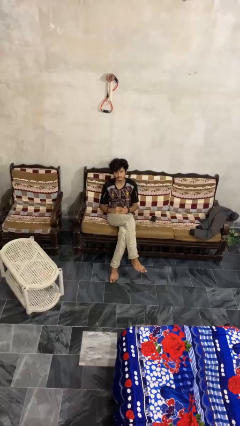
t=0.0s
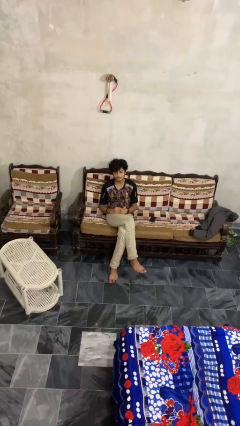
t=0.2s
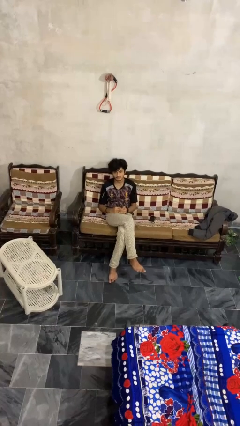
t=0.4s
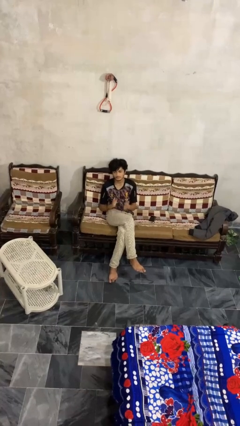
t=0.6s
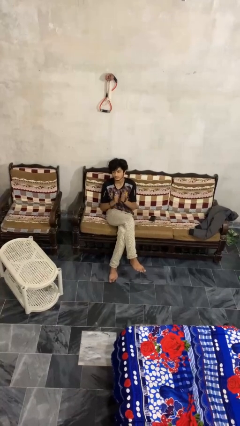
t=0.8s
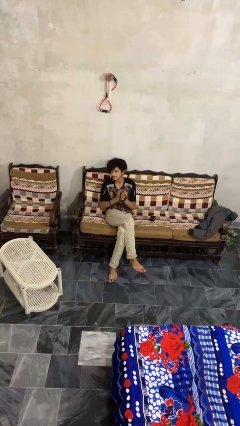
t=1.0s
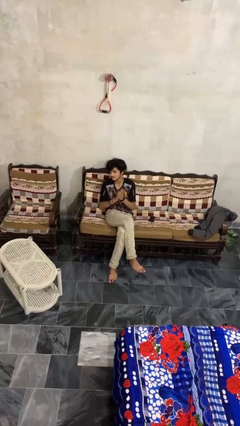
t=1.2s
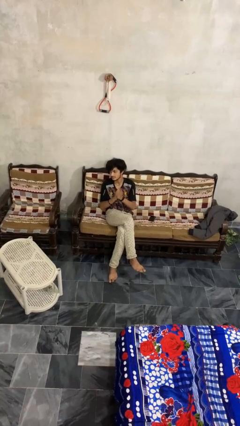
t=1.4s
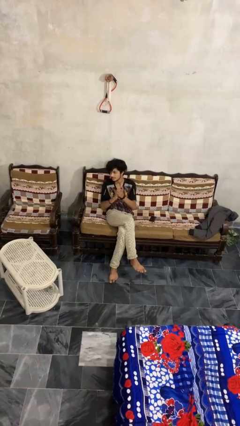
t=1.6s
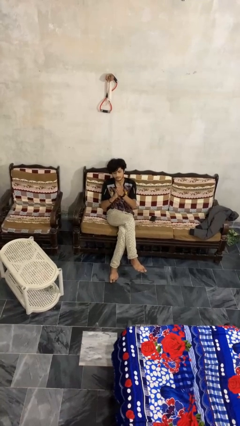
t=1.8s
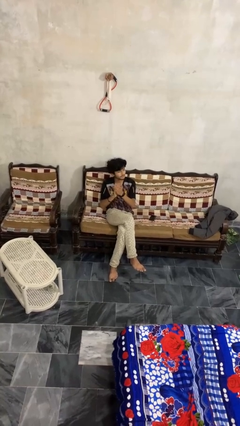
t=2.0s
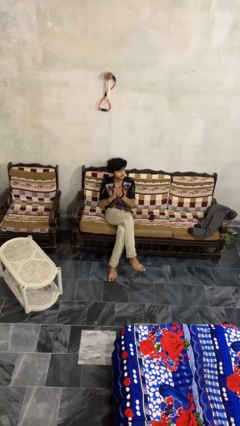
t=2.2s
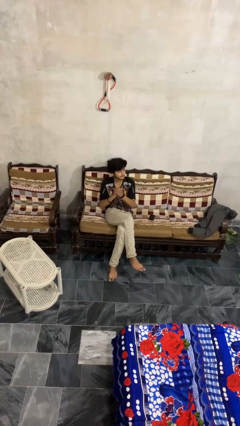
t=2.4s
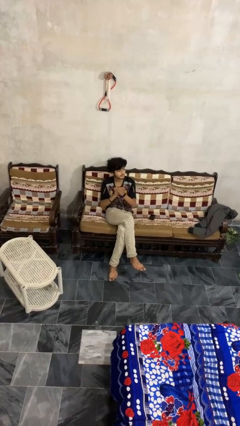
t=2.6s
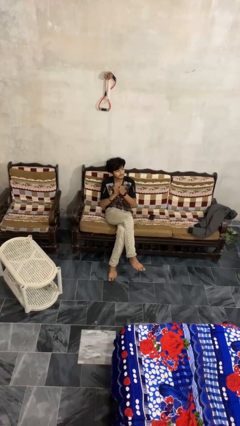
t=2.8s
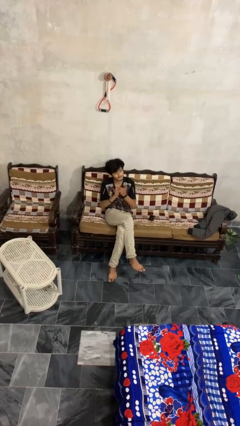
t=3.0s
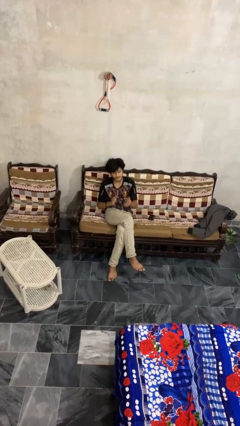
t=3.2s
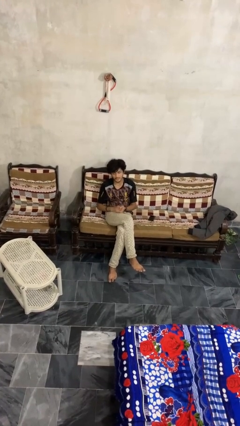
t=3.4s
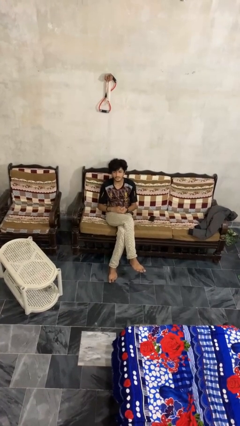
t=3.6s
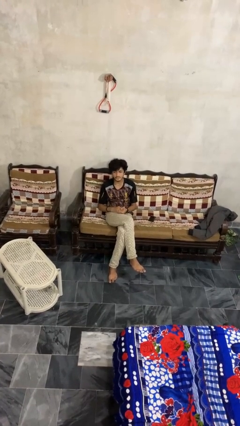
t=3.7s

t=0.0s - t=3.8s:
person claps hands

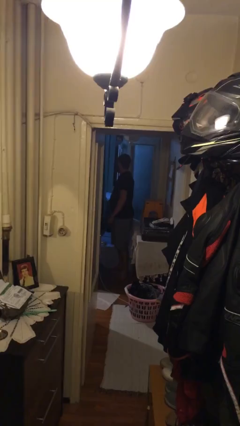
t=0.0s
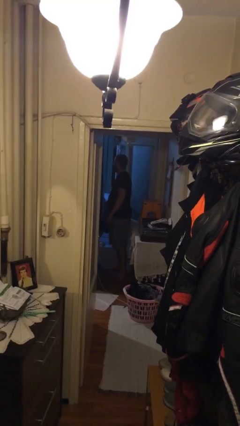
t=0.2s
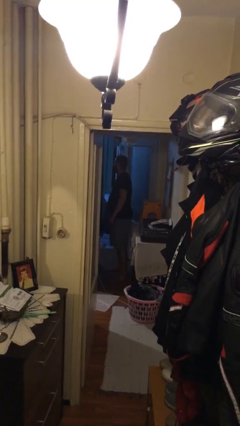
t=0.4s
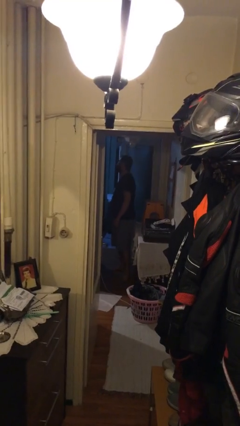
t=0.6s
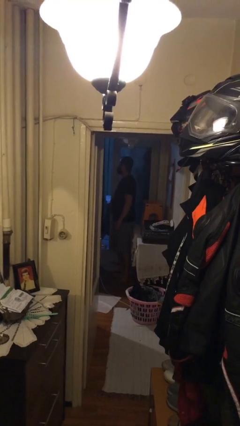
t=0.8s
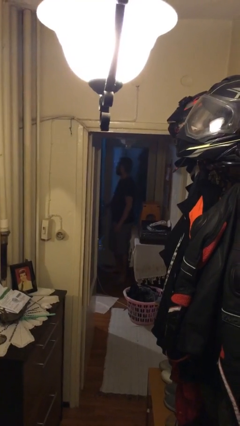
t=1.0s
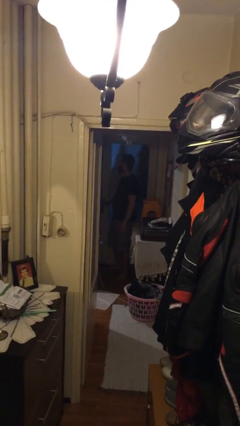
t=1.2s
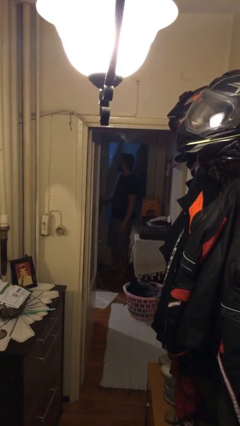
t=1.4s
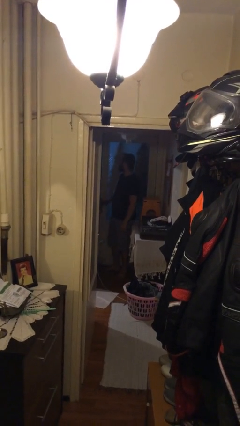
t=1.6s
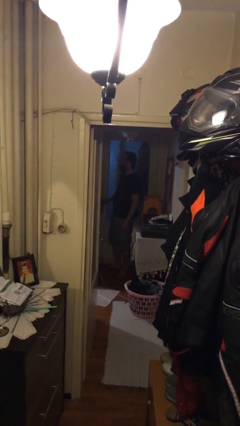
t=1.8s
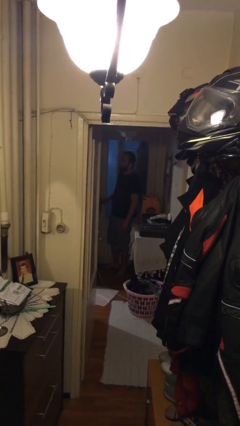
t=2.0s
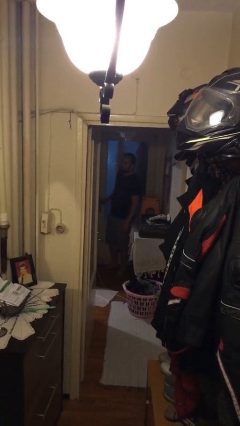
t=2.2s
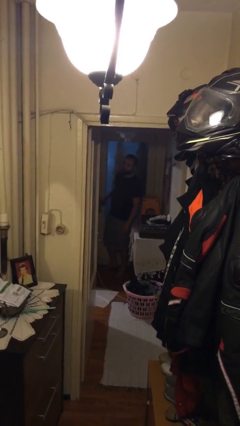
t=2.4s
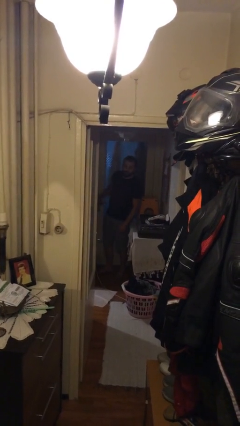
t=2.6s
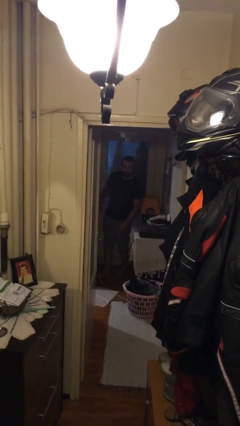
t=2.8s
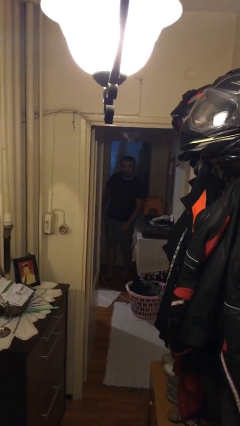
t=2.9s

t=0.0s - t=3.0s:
person closes facility door

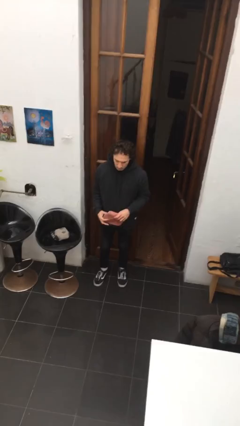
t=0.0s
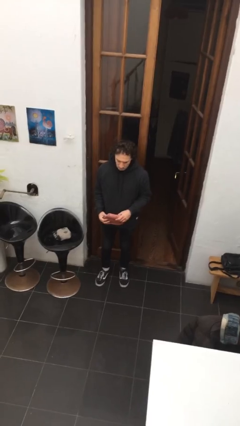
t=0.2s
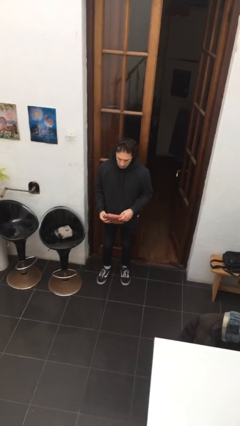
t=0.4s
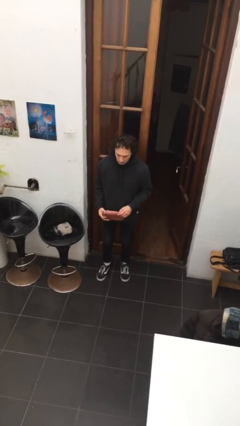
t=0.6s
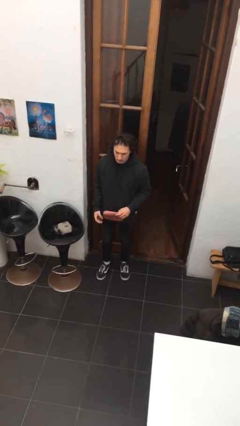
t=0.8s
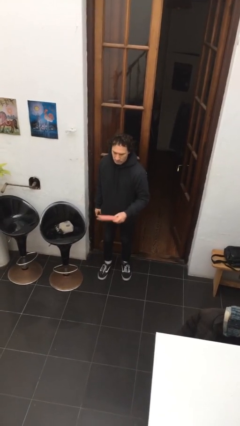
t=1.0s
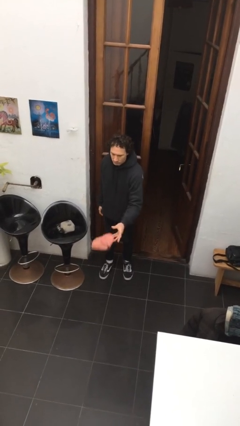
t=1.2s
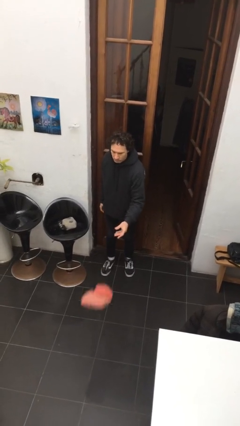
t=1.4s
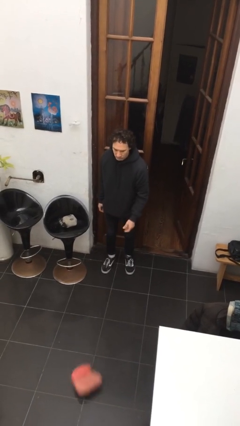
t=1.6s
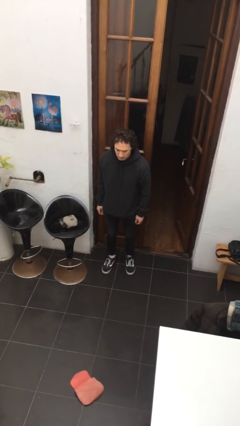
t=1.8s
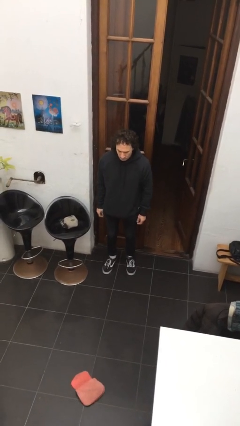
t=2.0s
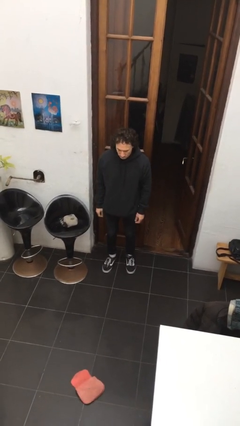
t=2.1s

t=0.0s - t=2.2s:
person throws object to ground

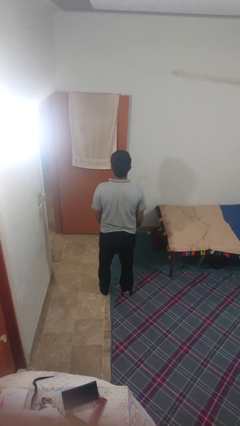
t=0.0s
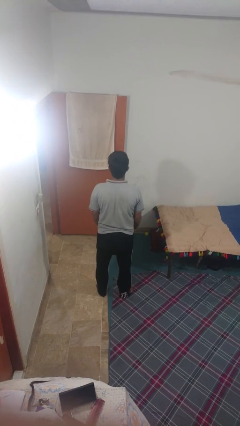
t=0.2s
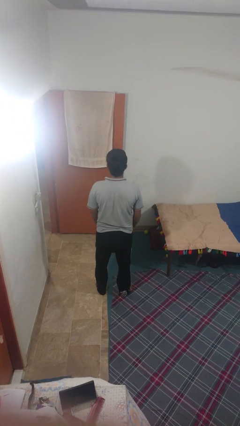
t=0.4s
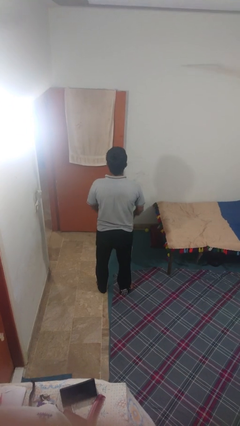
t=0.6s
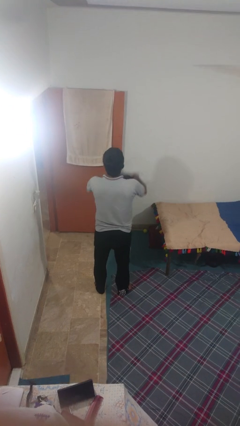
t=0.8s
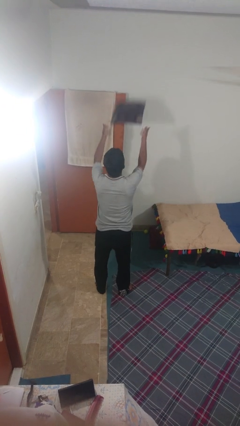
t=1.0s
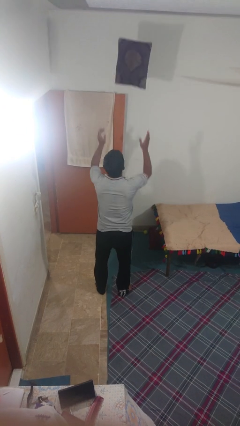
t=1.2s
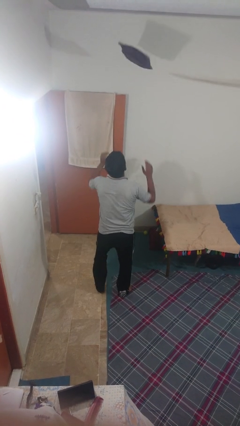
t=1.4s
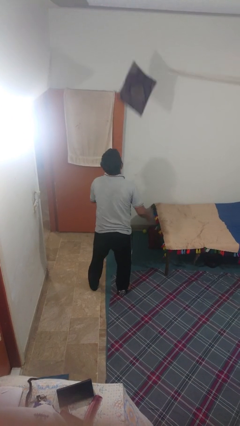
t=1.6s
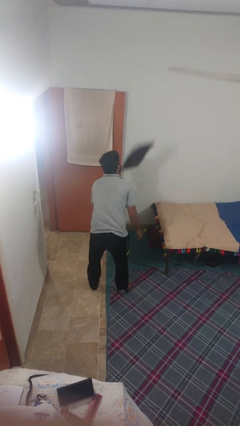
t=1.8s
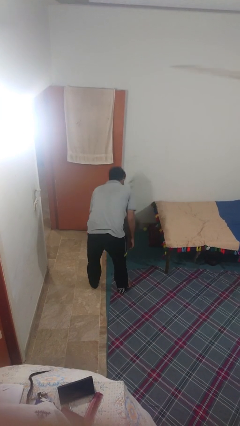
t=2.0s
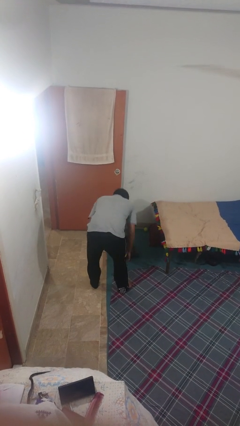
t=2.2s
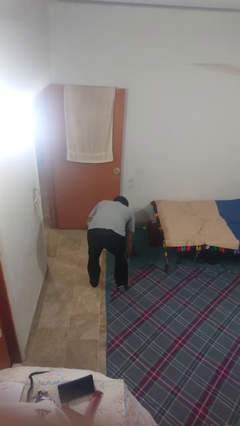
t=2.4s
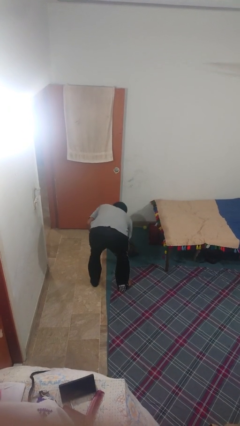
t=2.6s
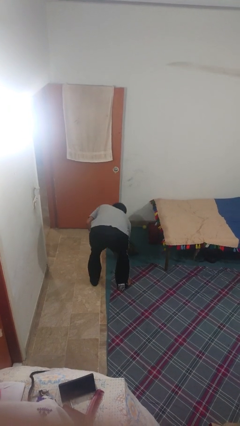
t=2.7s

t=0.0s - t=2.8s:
person throws object into air

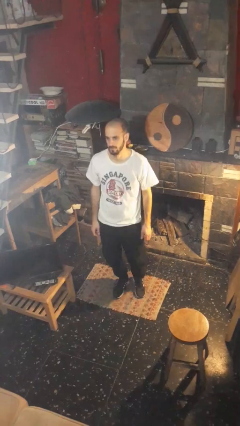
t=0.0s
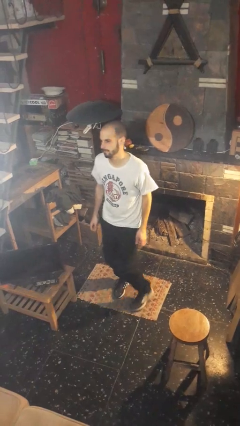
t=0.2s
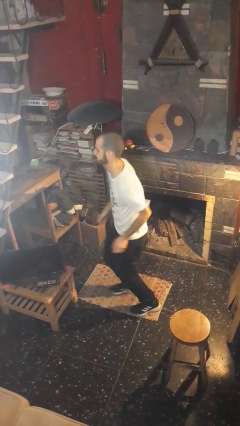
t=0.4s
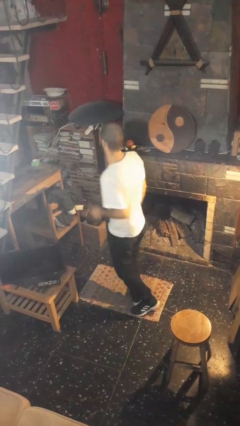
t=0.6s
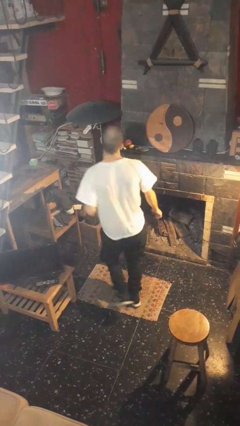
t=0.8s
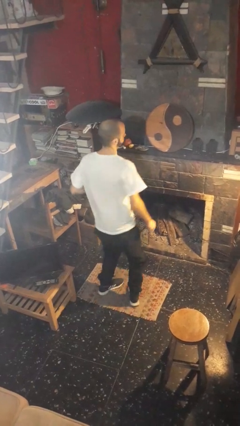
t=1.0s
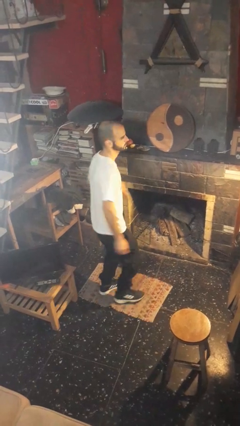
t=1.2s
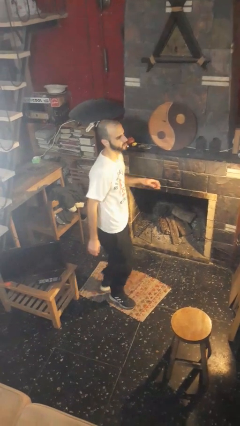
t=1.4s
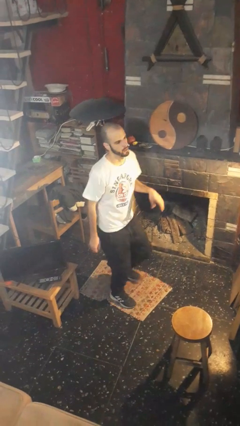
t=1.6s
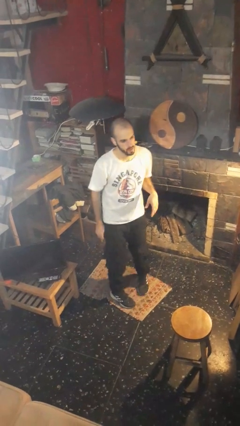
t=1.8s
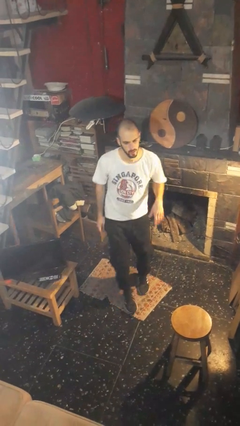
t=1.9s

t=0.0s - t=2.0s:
person twirls

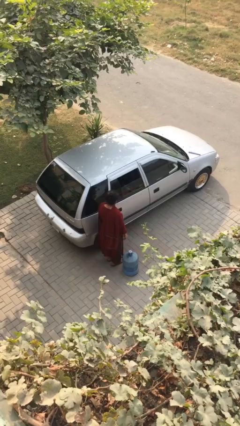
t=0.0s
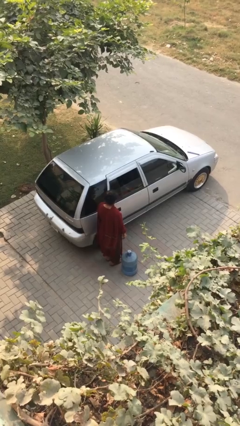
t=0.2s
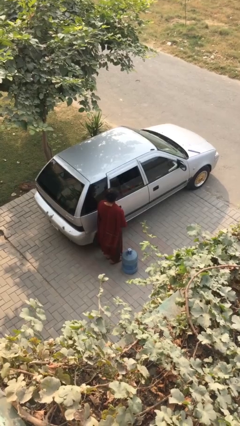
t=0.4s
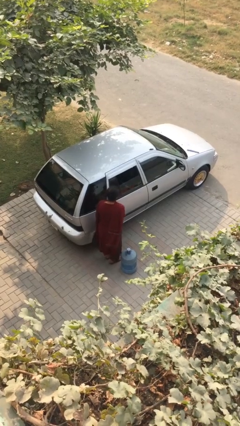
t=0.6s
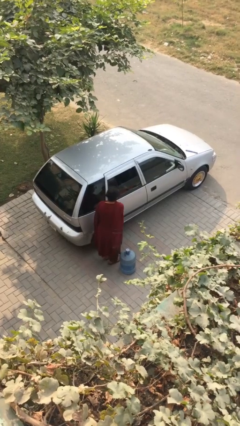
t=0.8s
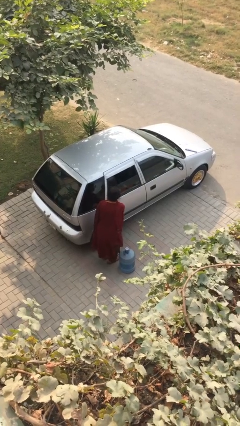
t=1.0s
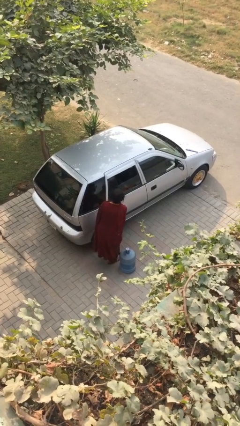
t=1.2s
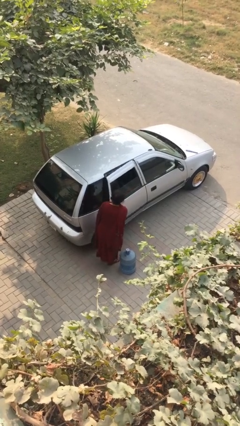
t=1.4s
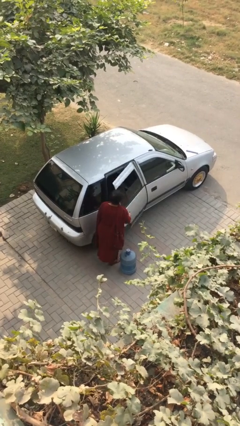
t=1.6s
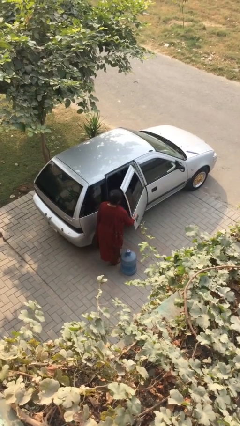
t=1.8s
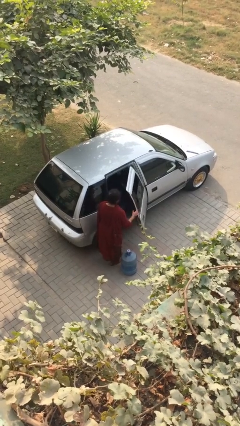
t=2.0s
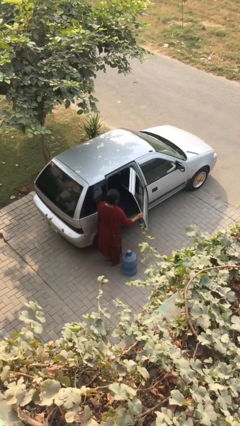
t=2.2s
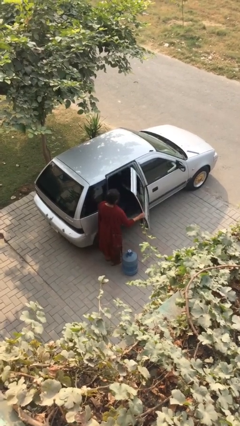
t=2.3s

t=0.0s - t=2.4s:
person opens car door

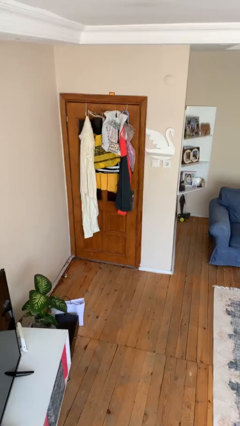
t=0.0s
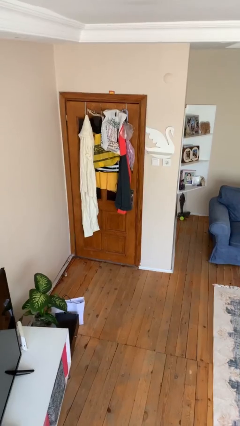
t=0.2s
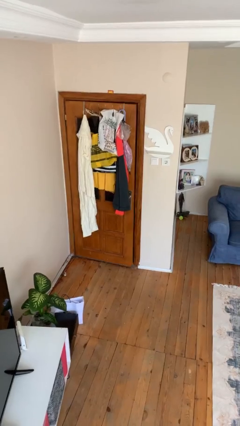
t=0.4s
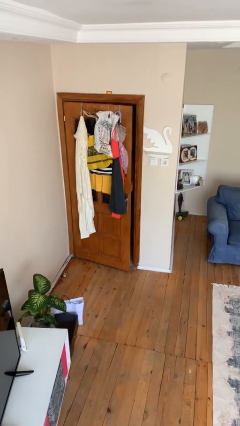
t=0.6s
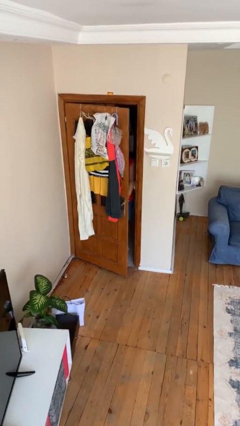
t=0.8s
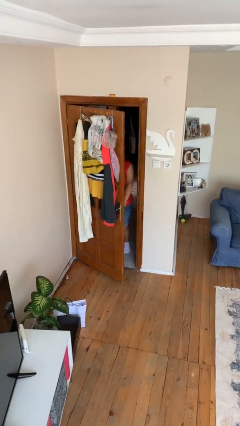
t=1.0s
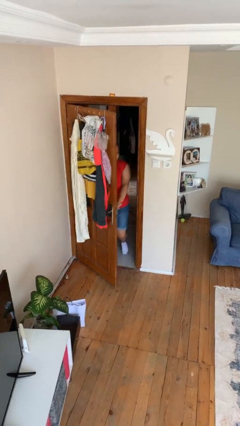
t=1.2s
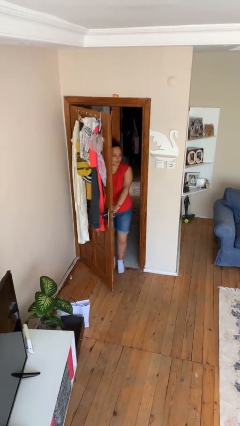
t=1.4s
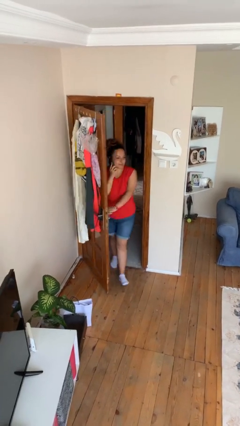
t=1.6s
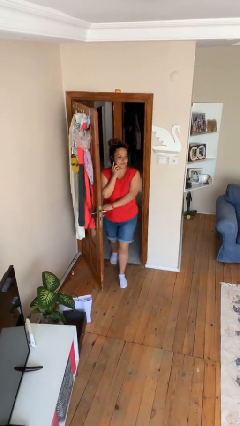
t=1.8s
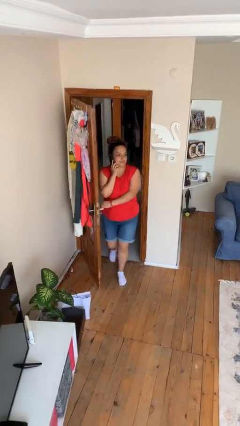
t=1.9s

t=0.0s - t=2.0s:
person opens facility door
